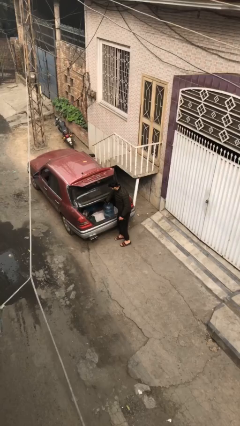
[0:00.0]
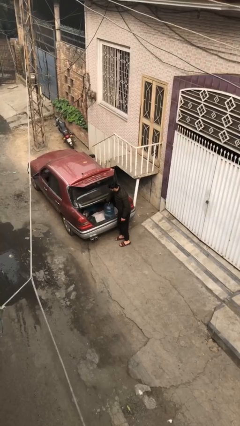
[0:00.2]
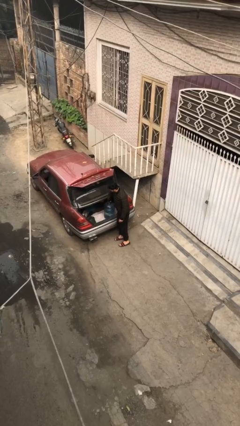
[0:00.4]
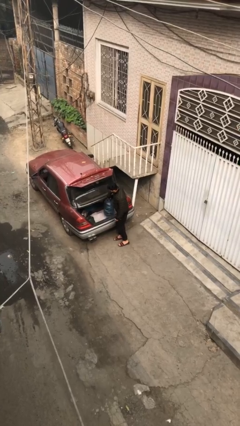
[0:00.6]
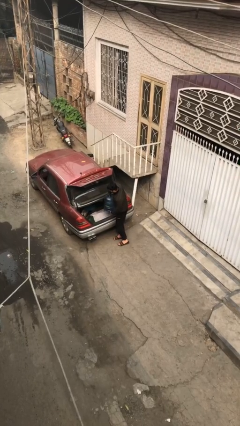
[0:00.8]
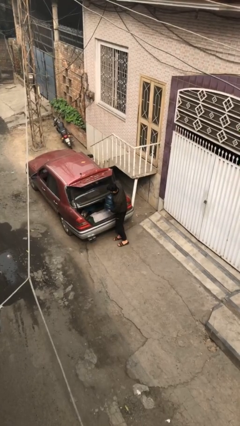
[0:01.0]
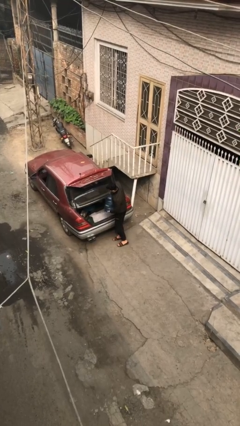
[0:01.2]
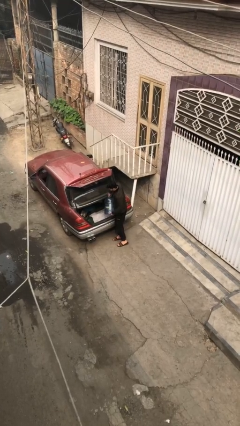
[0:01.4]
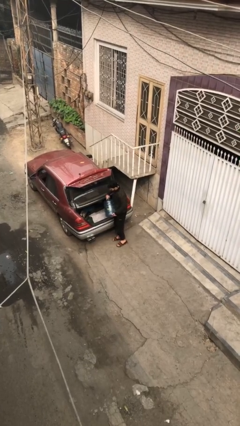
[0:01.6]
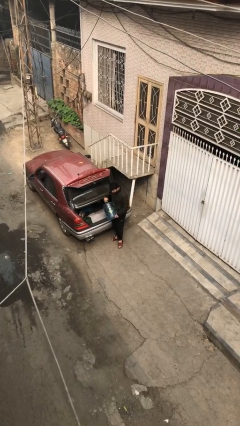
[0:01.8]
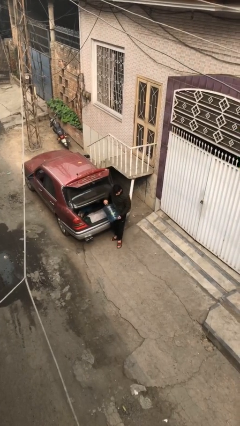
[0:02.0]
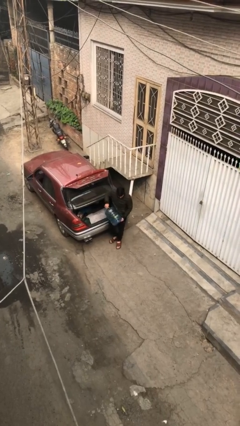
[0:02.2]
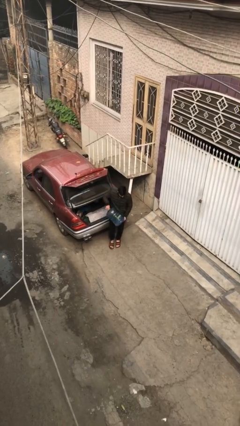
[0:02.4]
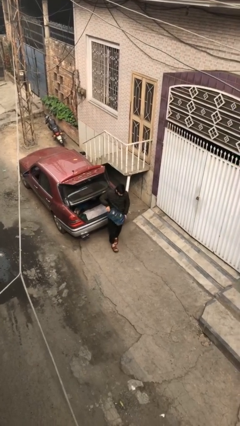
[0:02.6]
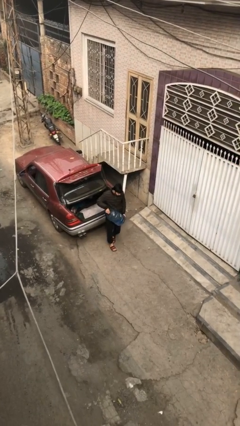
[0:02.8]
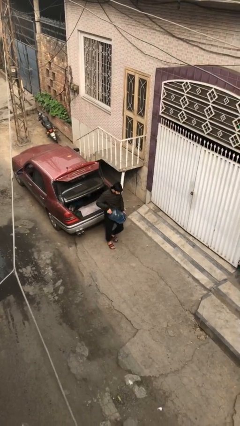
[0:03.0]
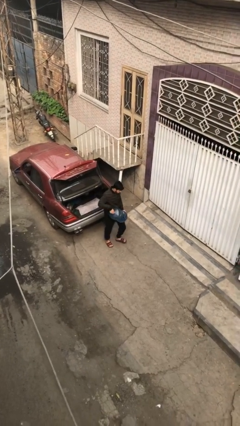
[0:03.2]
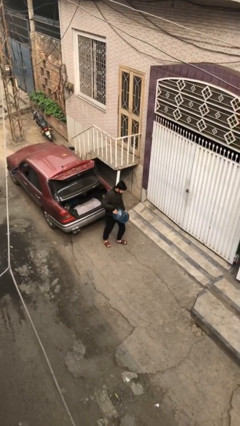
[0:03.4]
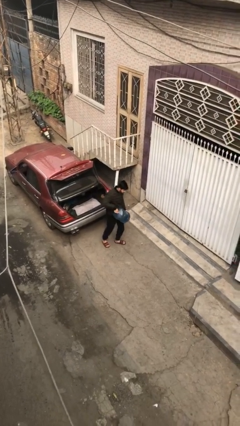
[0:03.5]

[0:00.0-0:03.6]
person unloads car

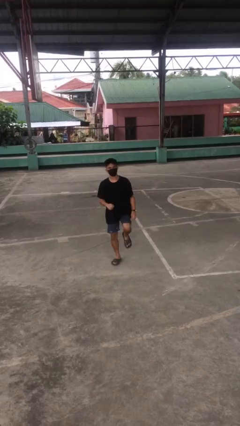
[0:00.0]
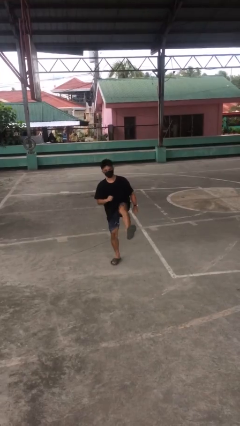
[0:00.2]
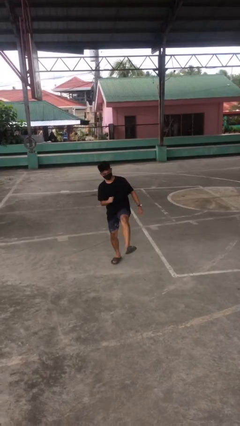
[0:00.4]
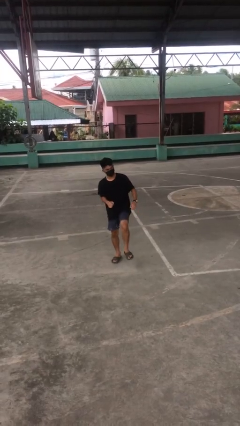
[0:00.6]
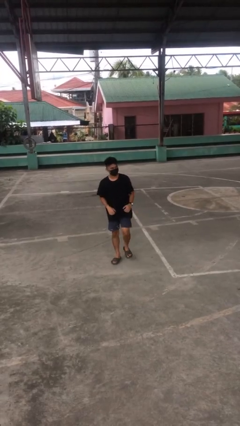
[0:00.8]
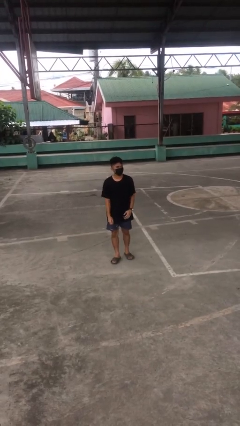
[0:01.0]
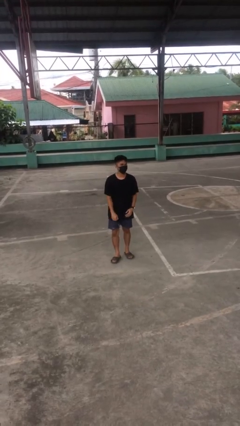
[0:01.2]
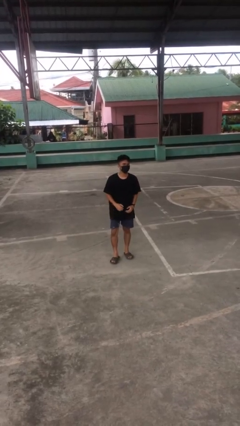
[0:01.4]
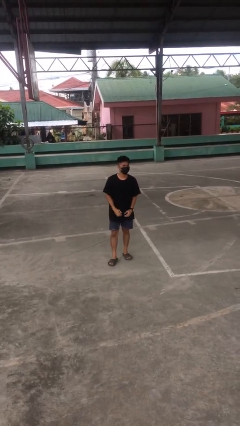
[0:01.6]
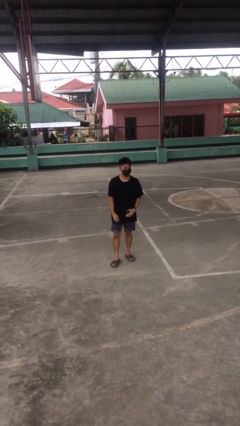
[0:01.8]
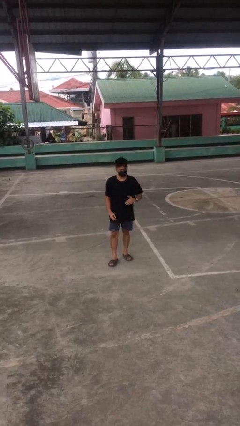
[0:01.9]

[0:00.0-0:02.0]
person karate kicks

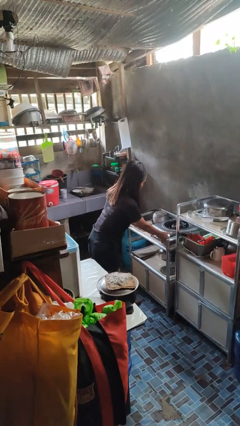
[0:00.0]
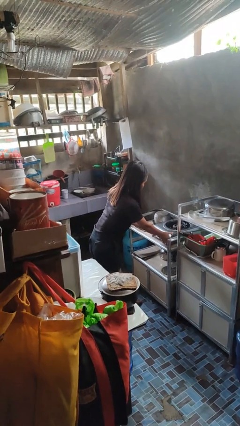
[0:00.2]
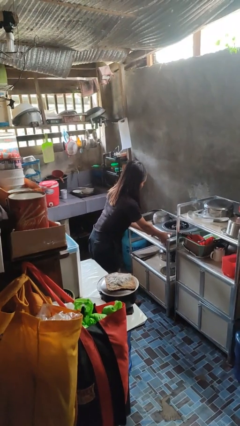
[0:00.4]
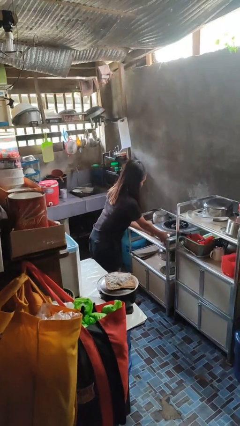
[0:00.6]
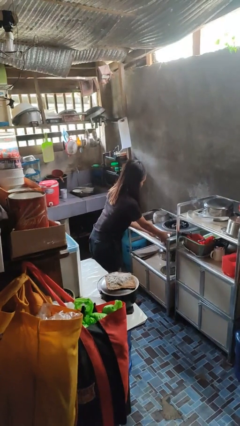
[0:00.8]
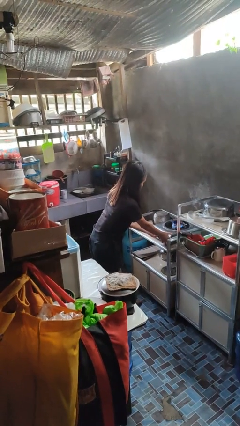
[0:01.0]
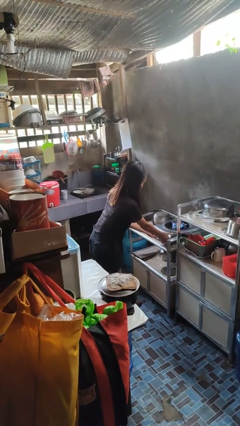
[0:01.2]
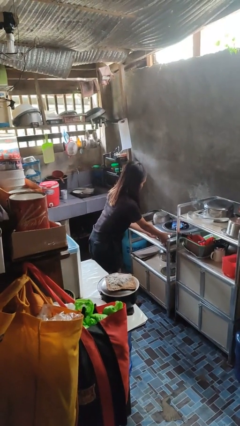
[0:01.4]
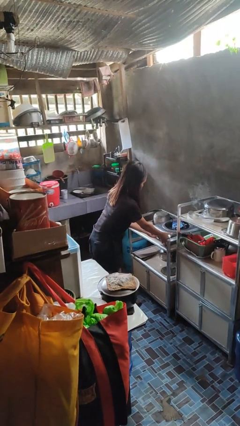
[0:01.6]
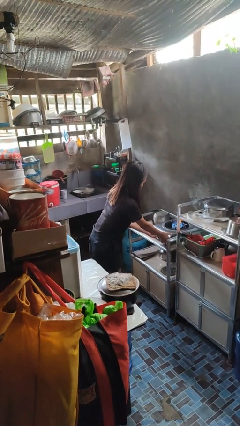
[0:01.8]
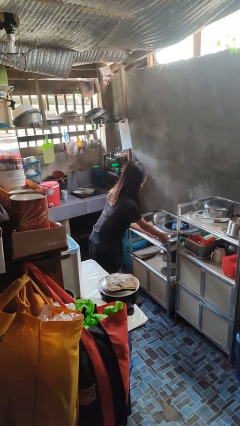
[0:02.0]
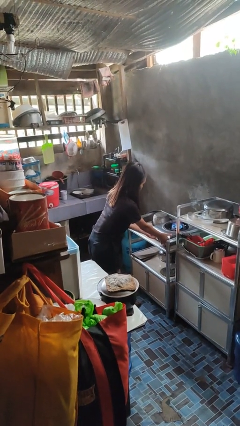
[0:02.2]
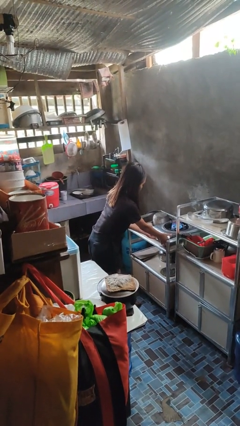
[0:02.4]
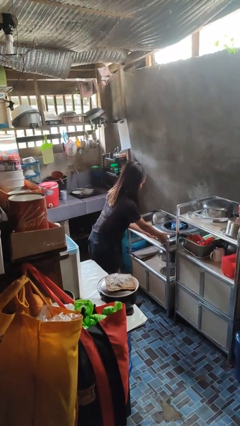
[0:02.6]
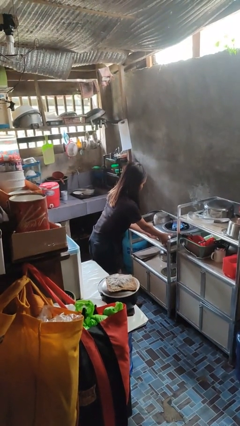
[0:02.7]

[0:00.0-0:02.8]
person turns on stovetop

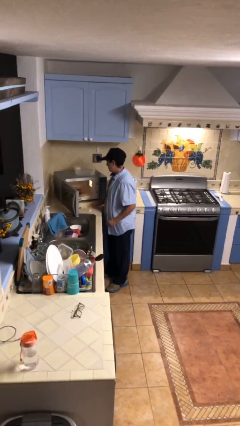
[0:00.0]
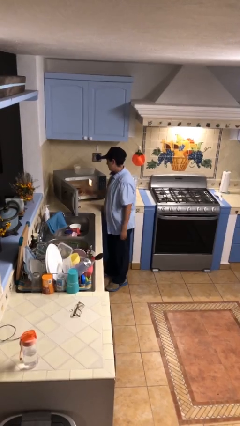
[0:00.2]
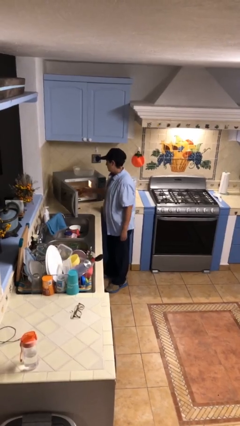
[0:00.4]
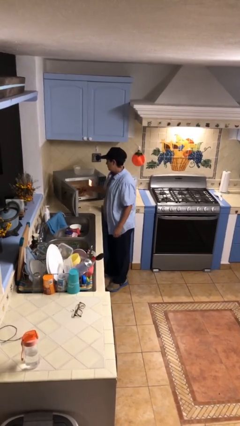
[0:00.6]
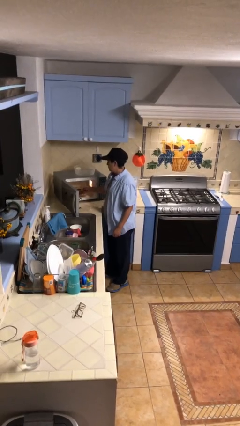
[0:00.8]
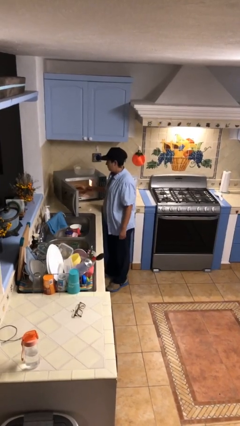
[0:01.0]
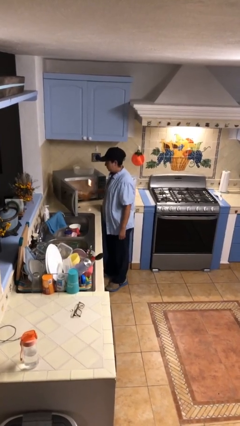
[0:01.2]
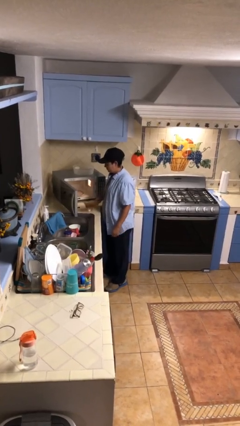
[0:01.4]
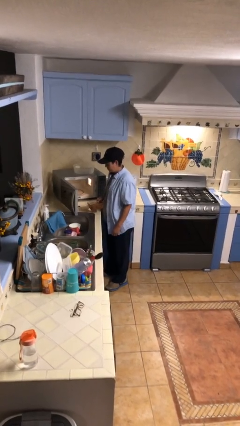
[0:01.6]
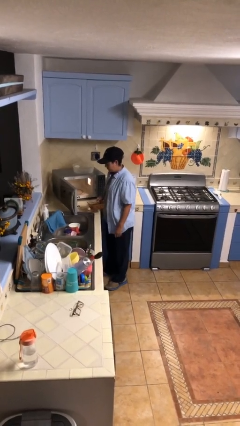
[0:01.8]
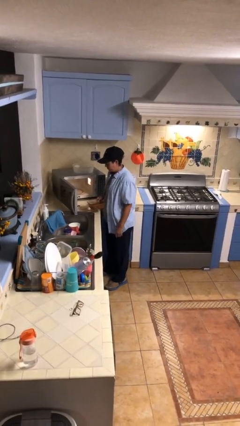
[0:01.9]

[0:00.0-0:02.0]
person takes object from microwave

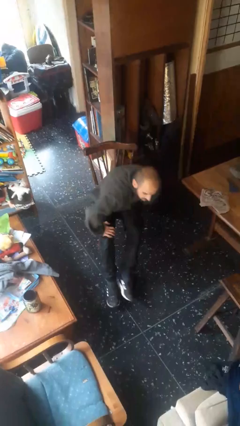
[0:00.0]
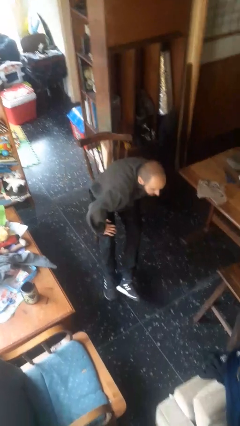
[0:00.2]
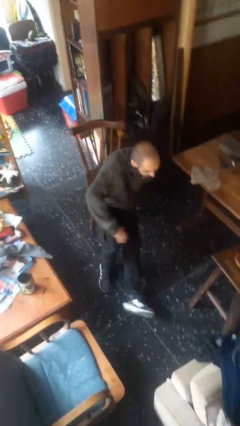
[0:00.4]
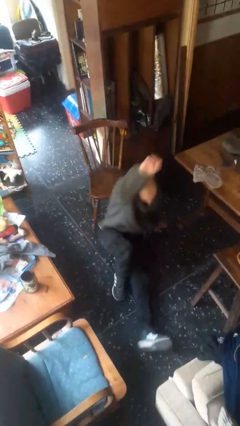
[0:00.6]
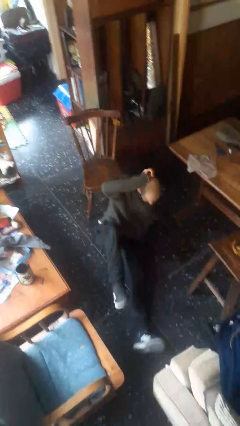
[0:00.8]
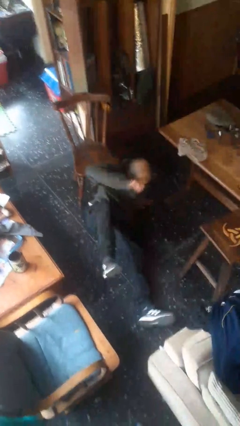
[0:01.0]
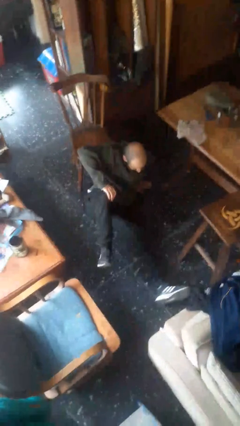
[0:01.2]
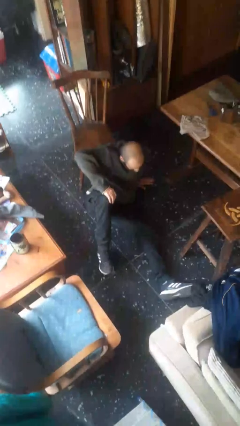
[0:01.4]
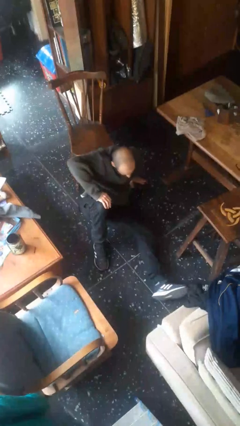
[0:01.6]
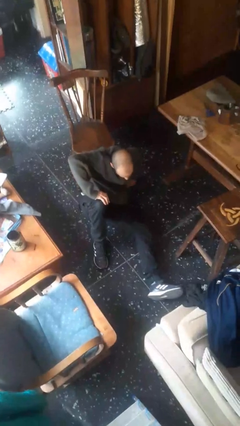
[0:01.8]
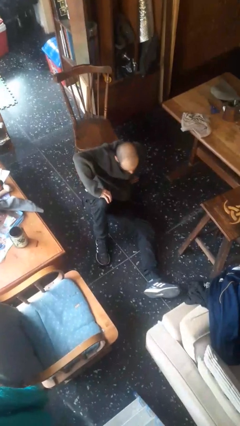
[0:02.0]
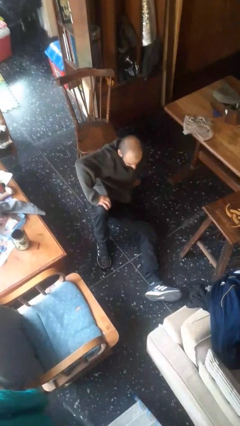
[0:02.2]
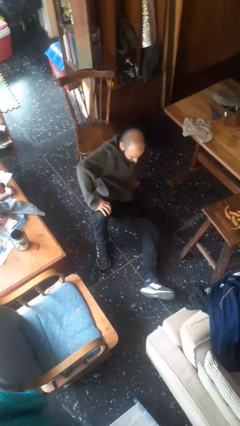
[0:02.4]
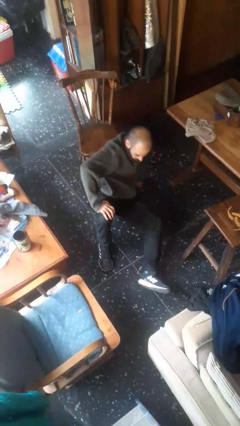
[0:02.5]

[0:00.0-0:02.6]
person falls from chair

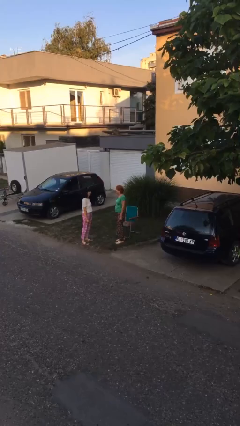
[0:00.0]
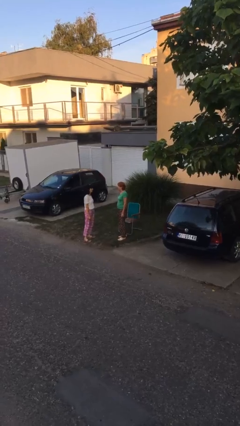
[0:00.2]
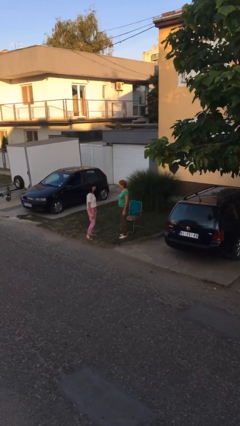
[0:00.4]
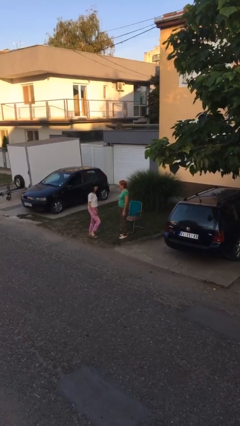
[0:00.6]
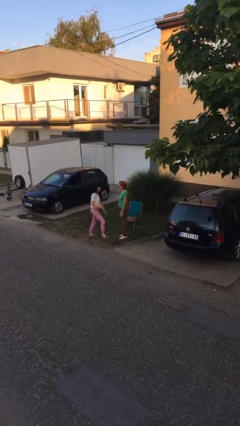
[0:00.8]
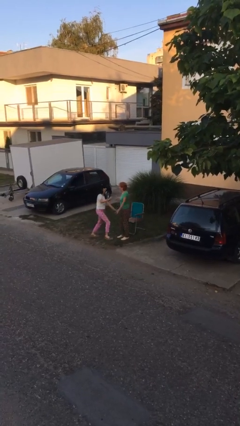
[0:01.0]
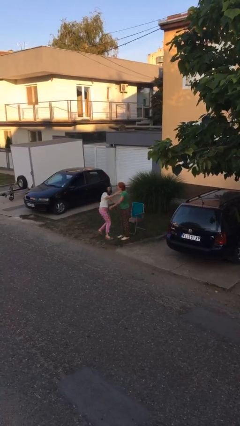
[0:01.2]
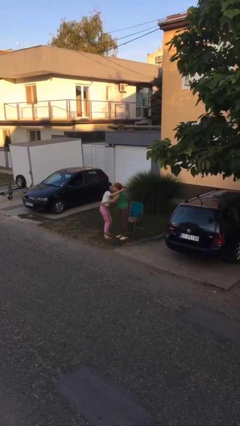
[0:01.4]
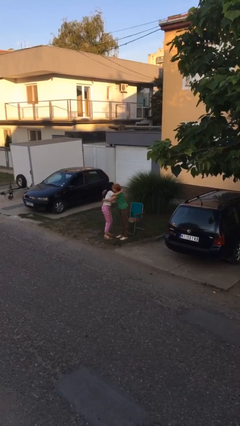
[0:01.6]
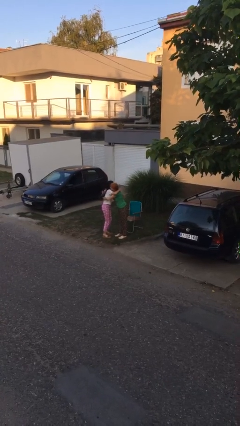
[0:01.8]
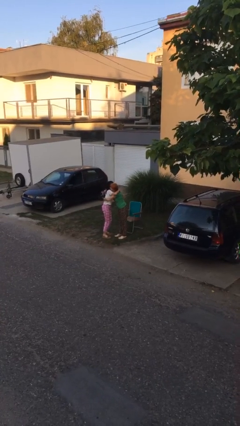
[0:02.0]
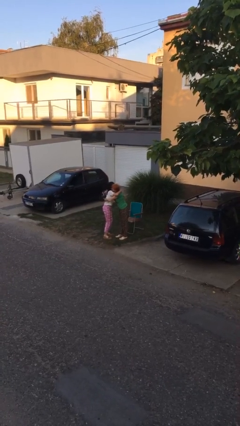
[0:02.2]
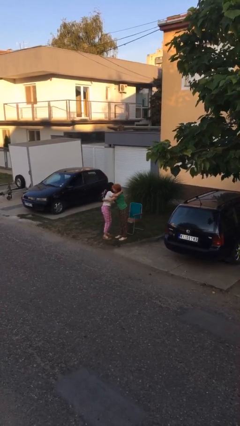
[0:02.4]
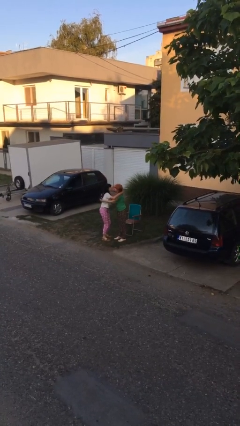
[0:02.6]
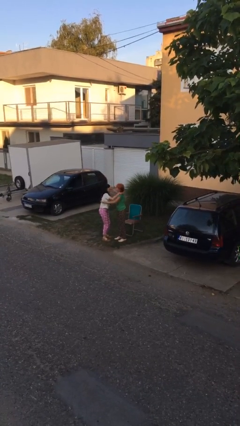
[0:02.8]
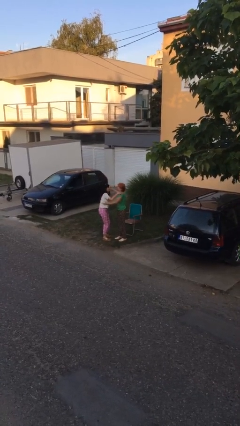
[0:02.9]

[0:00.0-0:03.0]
person embraces person

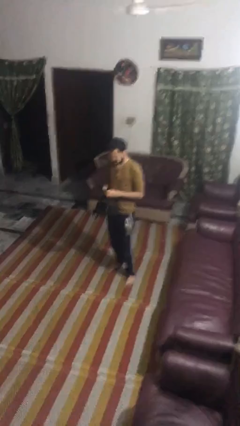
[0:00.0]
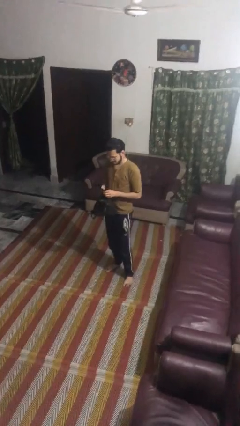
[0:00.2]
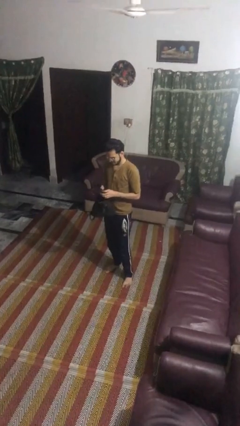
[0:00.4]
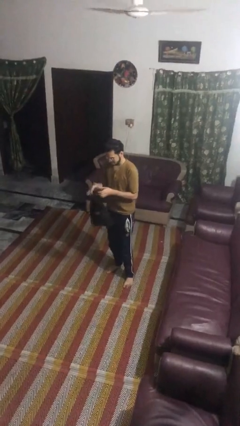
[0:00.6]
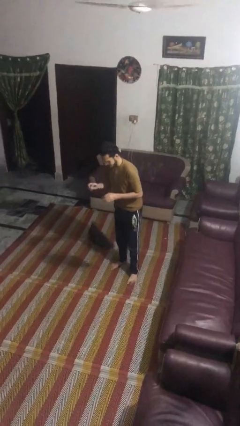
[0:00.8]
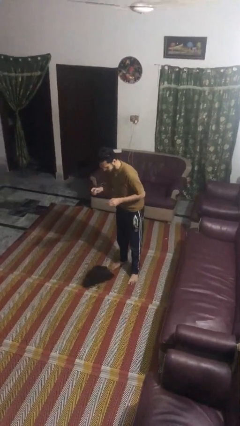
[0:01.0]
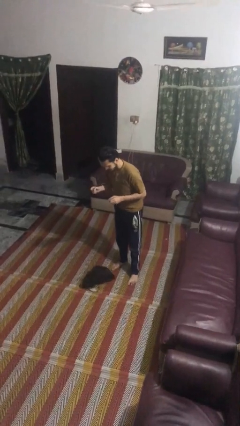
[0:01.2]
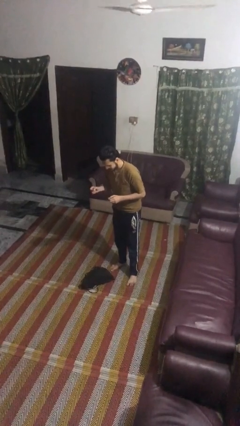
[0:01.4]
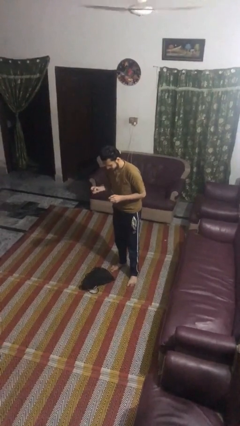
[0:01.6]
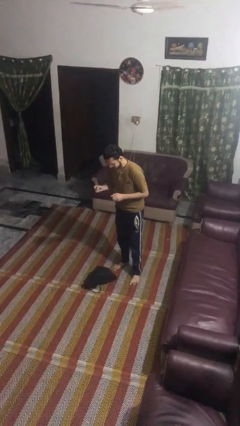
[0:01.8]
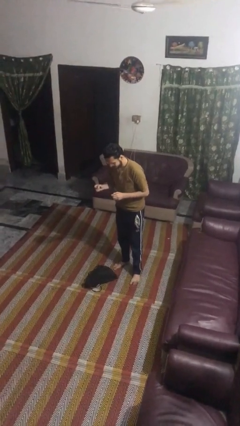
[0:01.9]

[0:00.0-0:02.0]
person drops object
